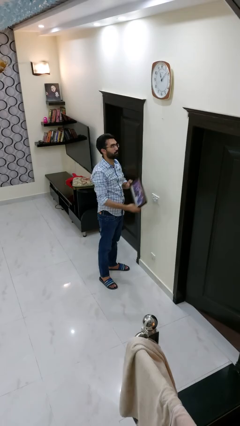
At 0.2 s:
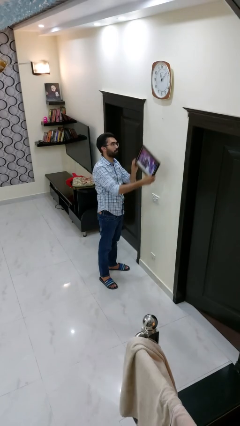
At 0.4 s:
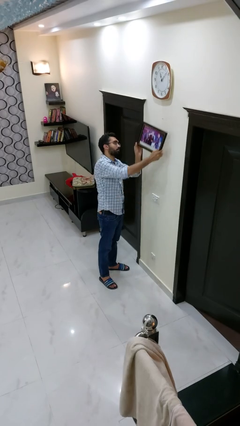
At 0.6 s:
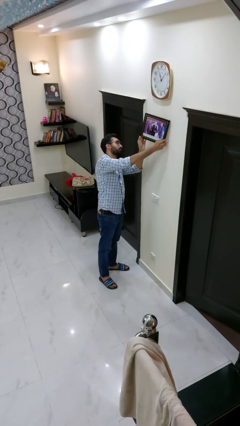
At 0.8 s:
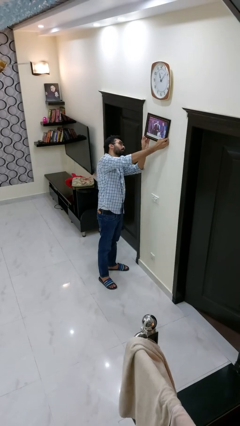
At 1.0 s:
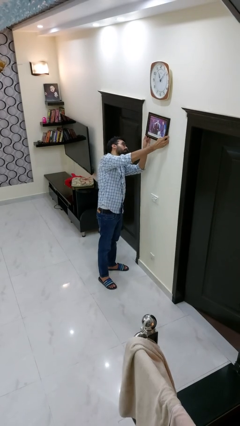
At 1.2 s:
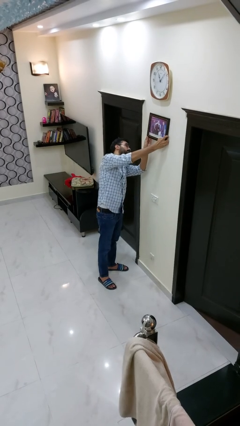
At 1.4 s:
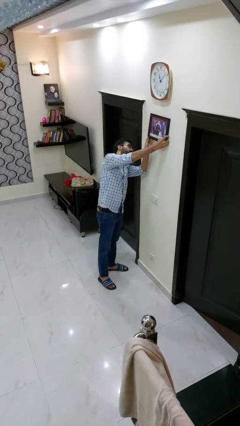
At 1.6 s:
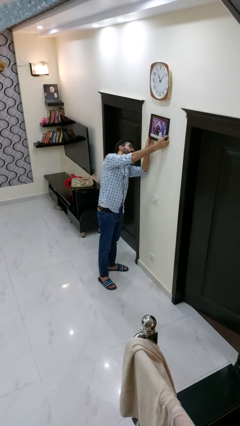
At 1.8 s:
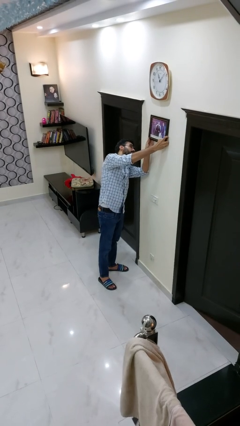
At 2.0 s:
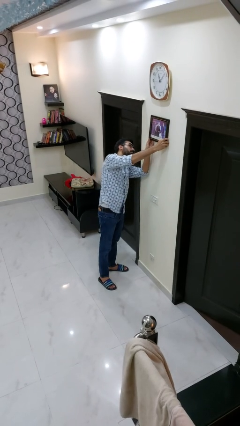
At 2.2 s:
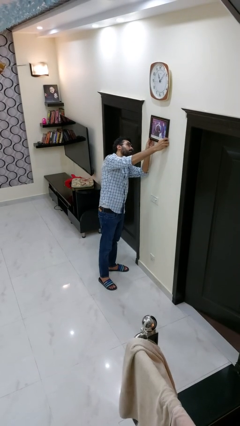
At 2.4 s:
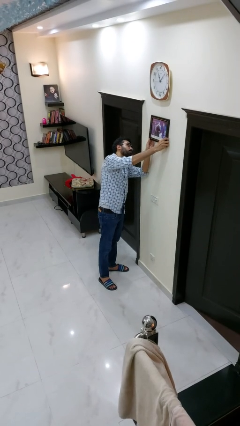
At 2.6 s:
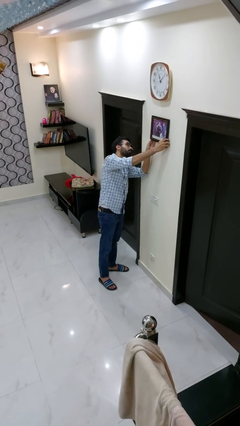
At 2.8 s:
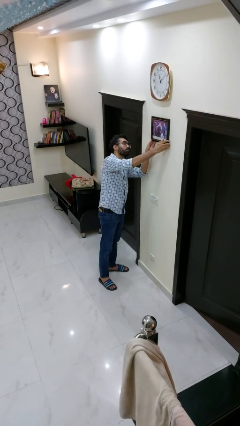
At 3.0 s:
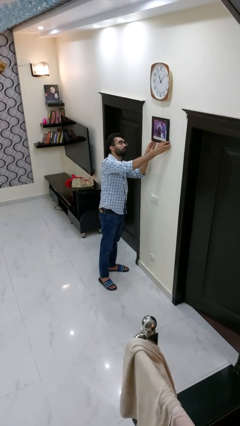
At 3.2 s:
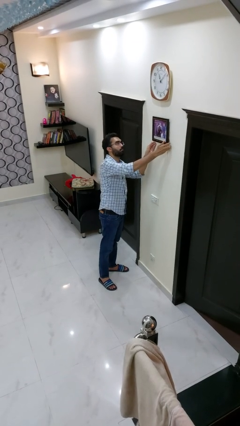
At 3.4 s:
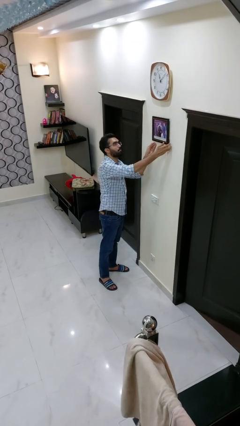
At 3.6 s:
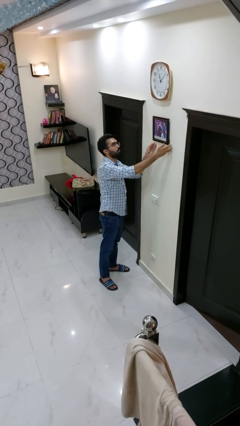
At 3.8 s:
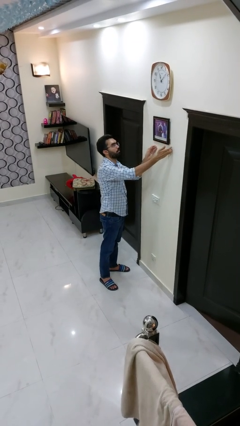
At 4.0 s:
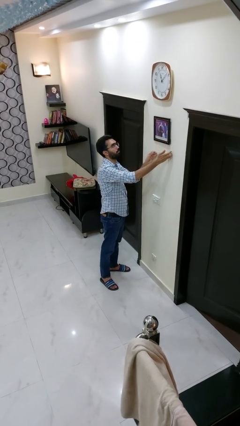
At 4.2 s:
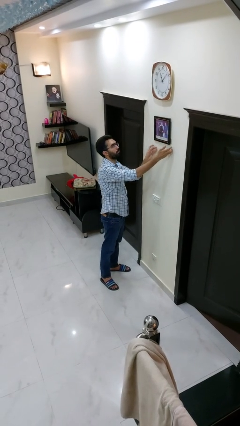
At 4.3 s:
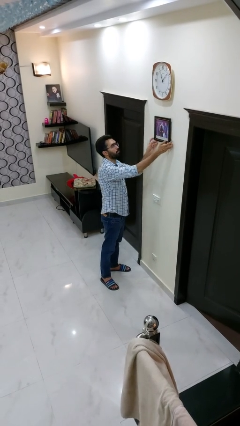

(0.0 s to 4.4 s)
person puts up picture frame

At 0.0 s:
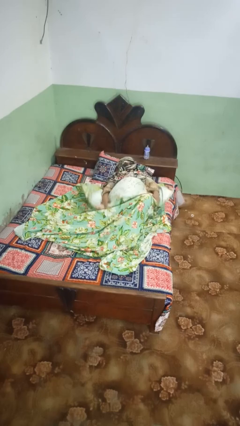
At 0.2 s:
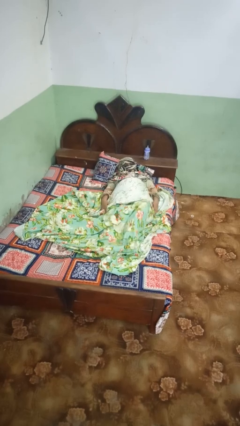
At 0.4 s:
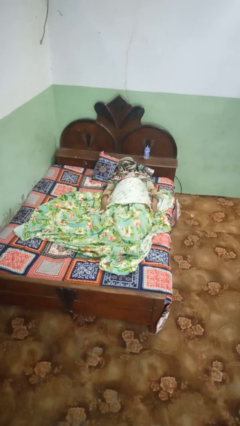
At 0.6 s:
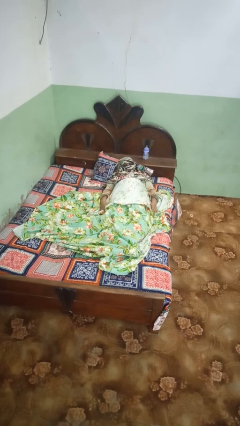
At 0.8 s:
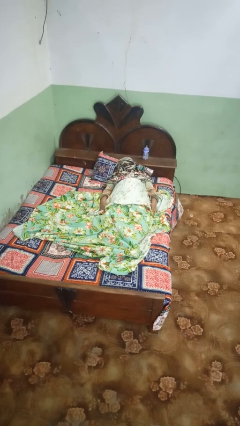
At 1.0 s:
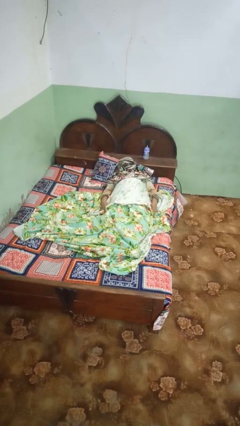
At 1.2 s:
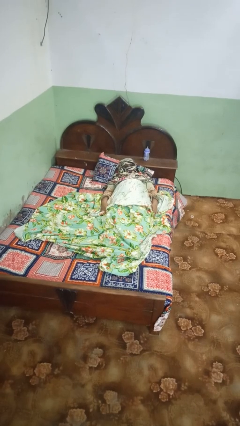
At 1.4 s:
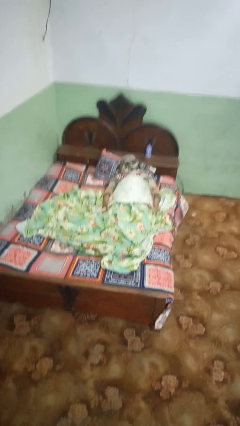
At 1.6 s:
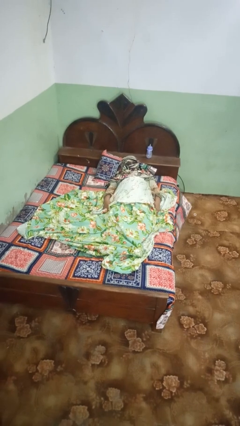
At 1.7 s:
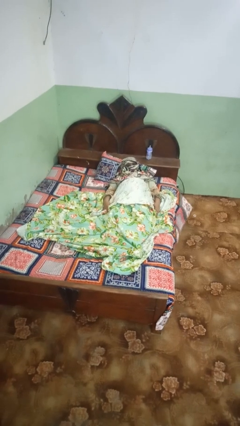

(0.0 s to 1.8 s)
person uncovers with bedsheets

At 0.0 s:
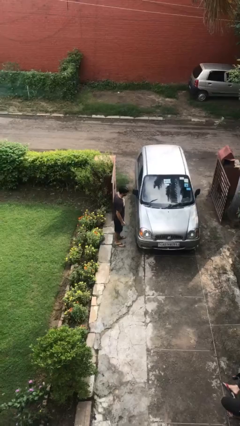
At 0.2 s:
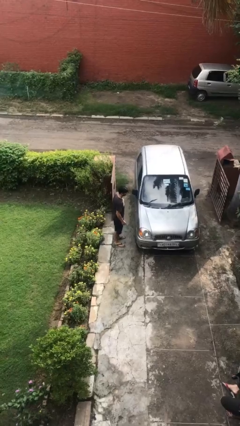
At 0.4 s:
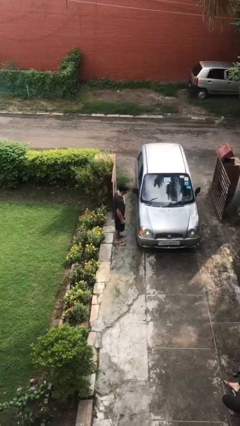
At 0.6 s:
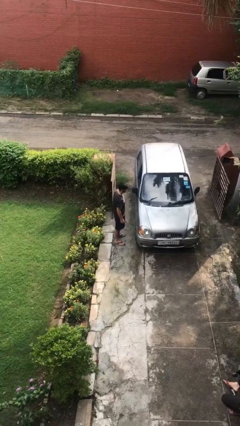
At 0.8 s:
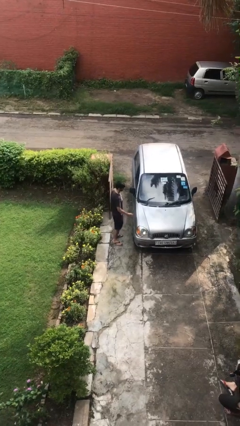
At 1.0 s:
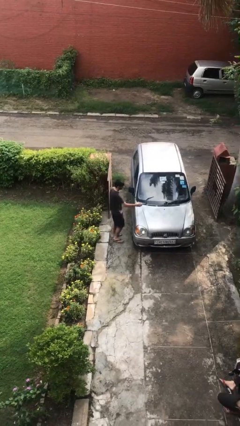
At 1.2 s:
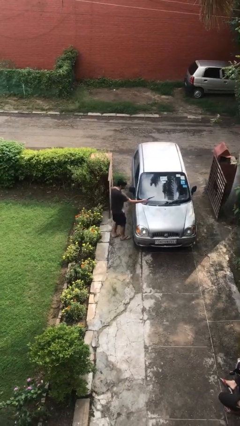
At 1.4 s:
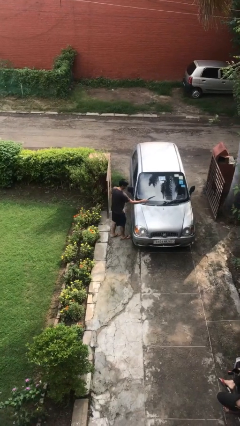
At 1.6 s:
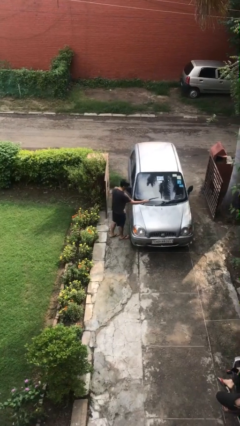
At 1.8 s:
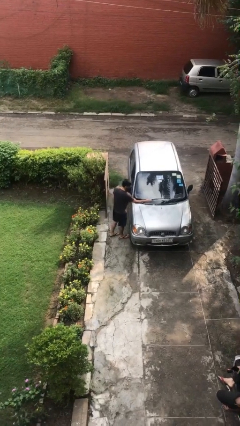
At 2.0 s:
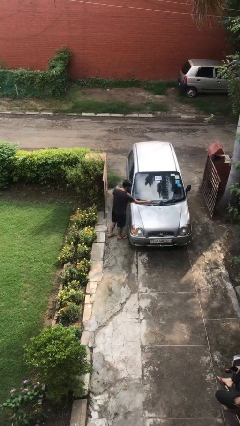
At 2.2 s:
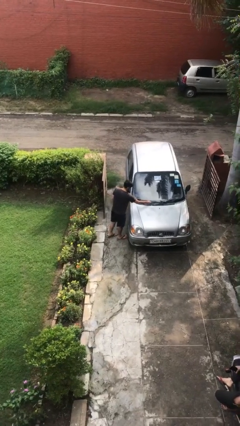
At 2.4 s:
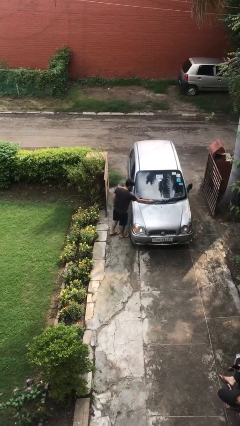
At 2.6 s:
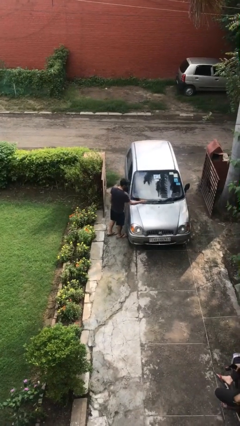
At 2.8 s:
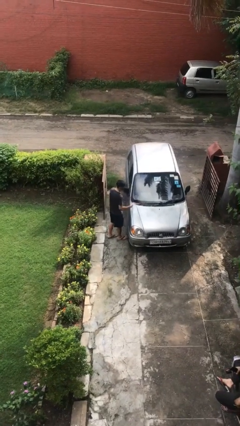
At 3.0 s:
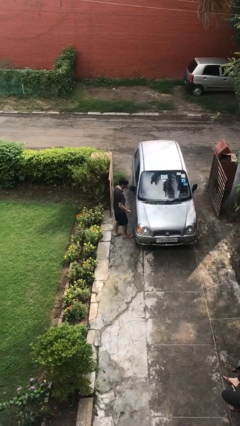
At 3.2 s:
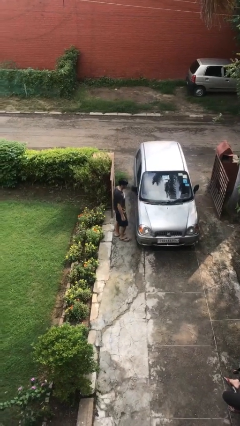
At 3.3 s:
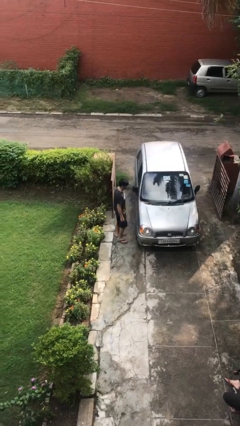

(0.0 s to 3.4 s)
person flips down car wipers

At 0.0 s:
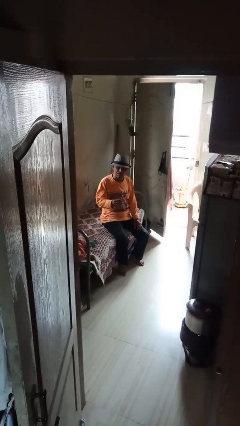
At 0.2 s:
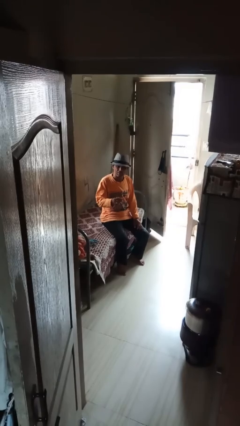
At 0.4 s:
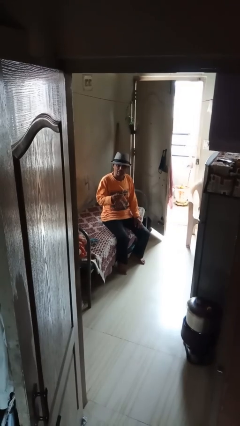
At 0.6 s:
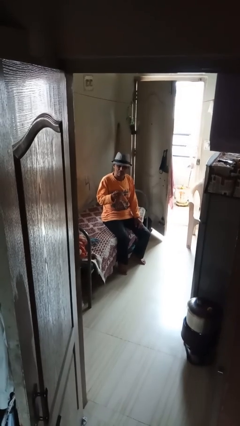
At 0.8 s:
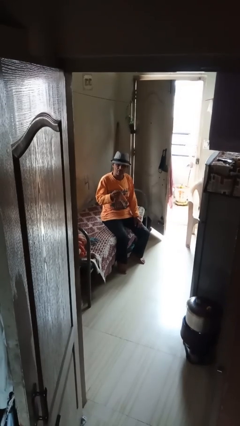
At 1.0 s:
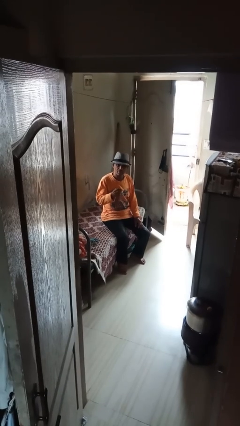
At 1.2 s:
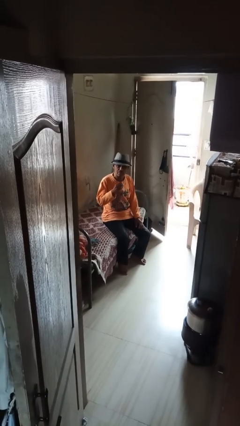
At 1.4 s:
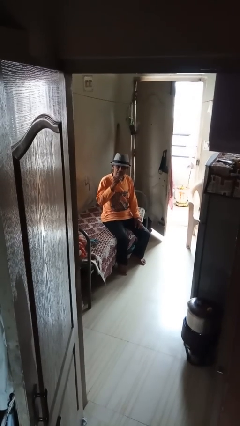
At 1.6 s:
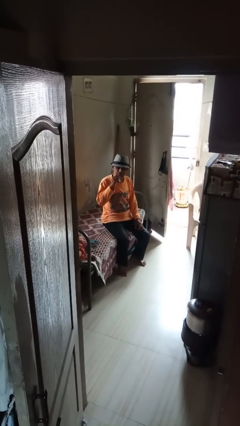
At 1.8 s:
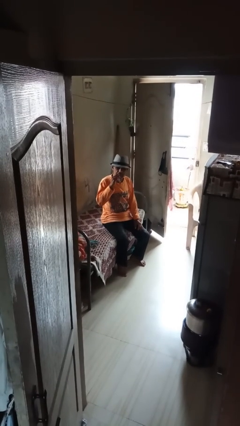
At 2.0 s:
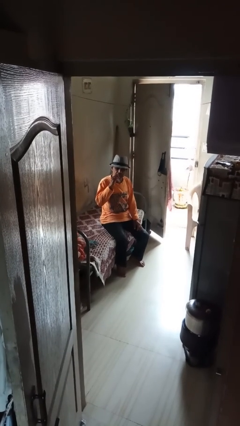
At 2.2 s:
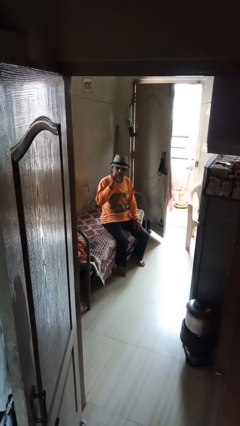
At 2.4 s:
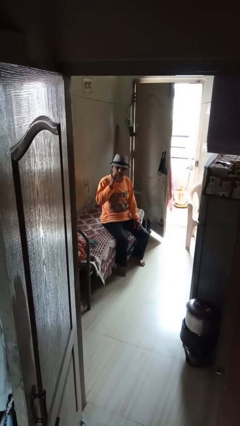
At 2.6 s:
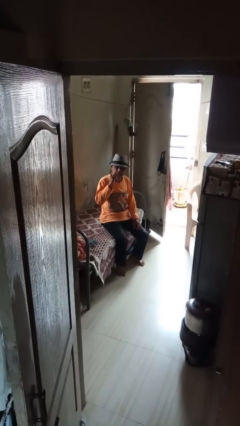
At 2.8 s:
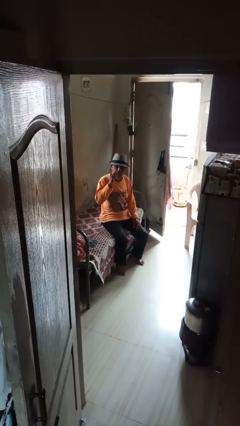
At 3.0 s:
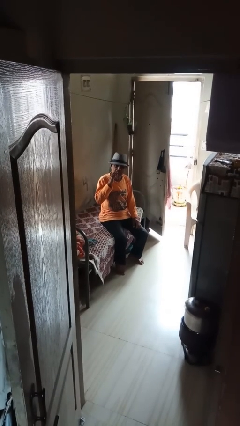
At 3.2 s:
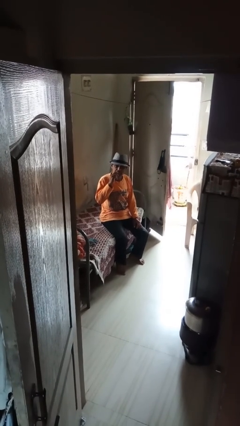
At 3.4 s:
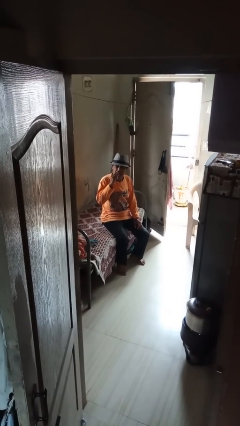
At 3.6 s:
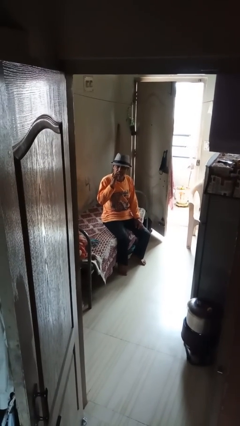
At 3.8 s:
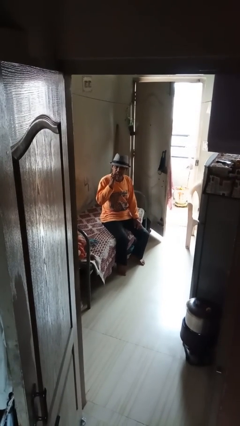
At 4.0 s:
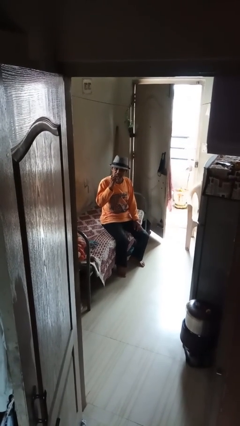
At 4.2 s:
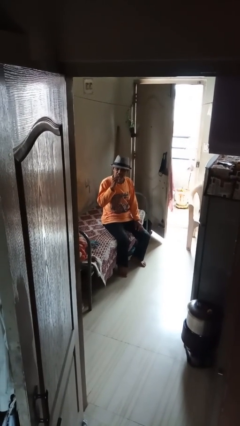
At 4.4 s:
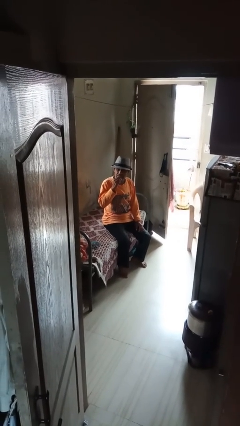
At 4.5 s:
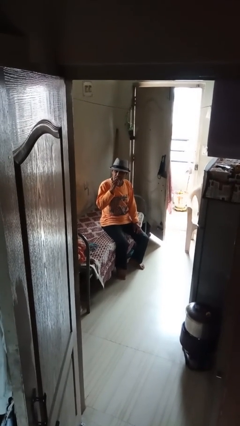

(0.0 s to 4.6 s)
person flosses

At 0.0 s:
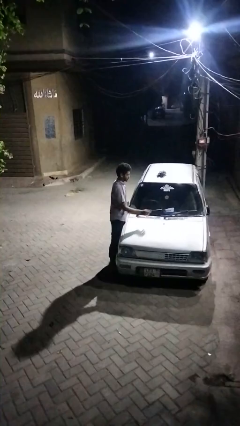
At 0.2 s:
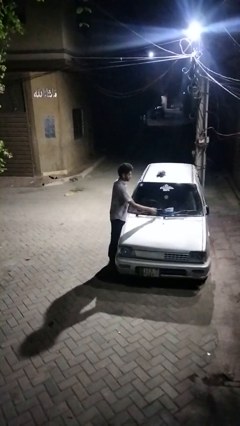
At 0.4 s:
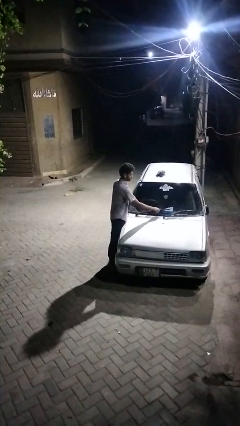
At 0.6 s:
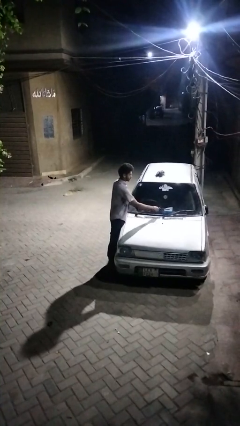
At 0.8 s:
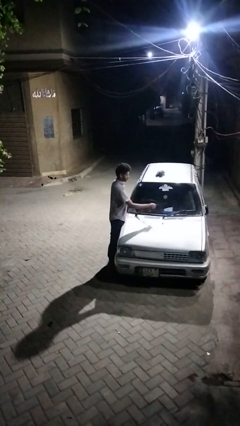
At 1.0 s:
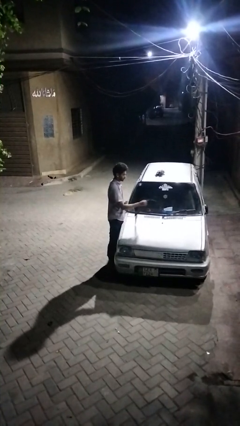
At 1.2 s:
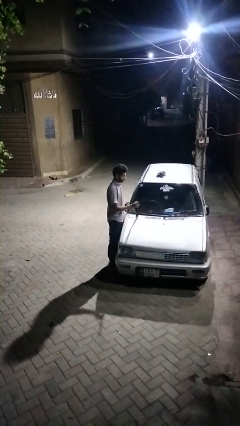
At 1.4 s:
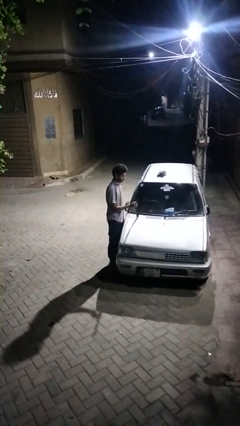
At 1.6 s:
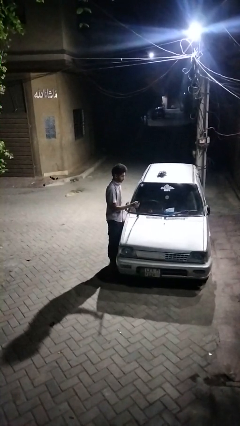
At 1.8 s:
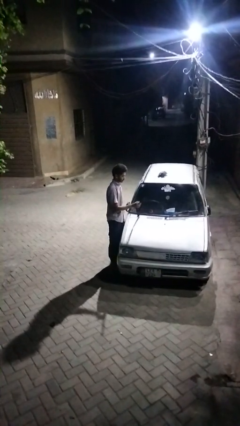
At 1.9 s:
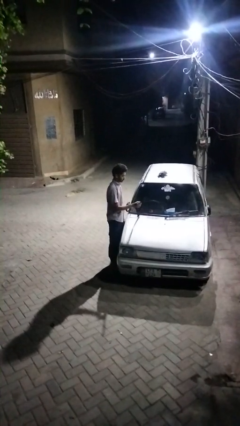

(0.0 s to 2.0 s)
person flips up car wipers

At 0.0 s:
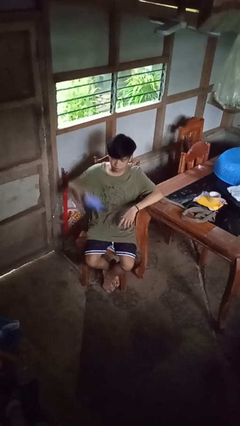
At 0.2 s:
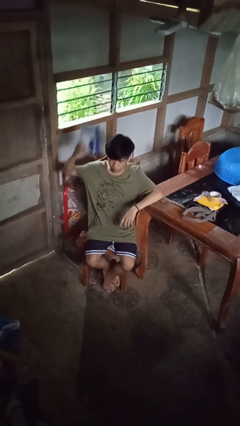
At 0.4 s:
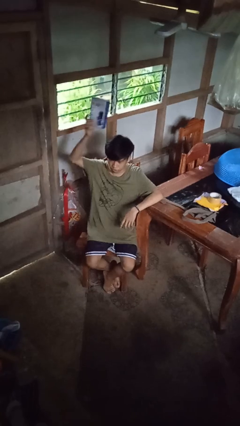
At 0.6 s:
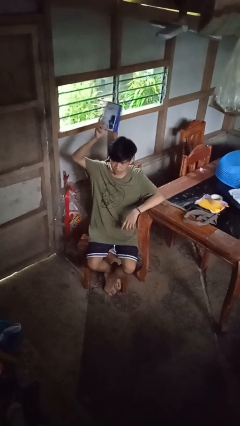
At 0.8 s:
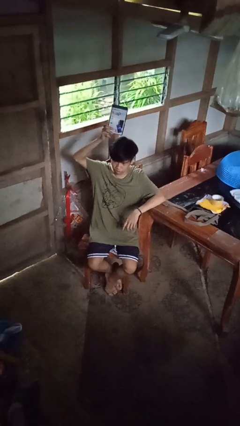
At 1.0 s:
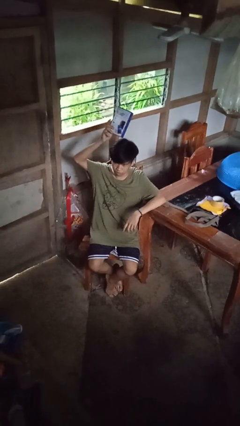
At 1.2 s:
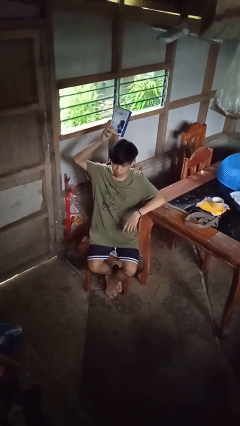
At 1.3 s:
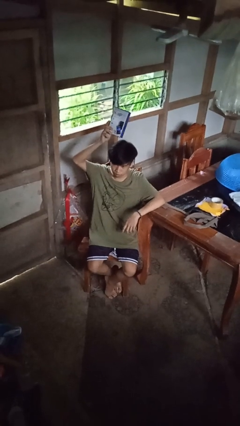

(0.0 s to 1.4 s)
person holds object above head
